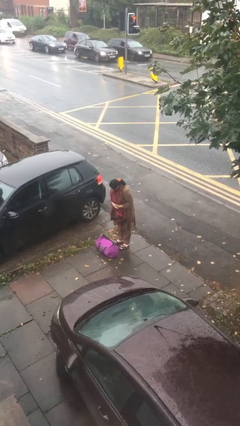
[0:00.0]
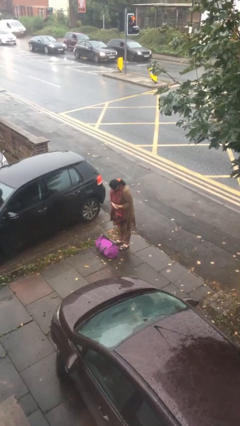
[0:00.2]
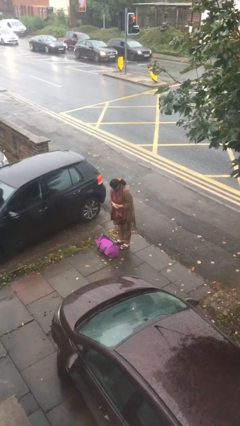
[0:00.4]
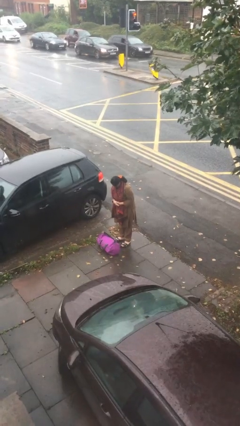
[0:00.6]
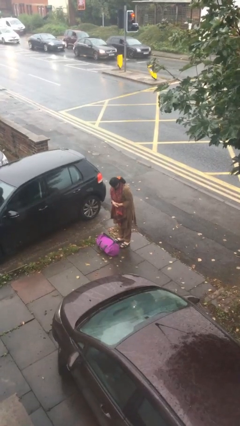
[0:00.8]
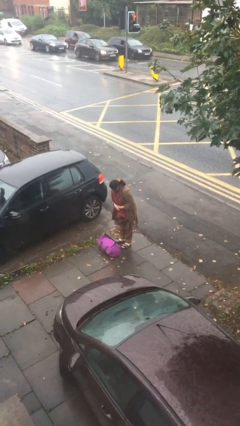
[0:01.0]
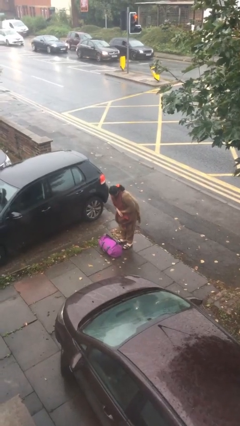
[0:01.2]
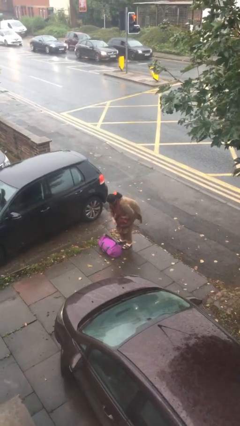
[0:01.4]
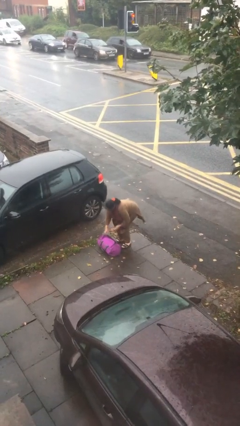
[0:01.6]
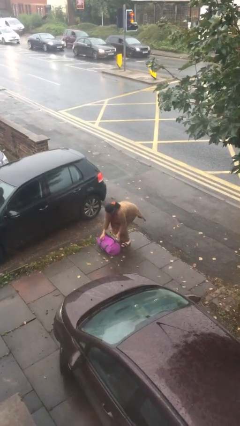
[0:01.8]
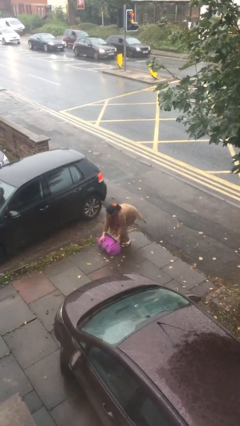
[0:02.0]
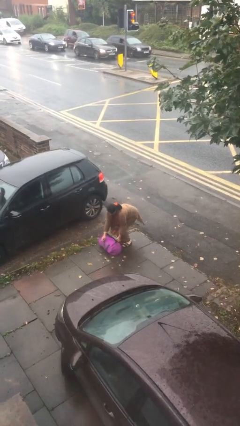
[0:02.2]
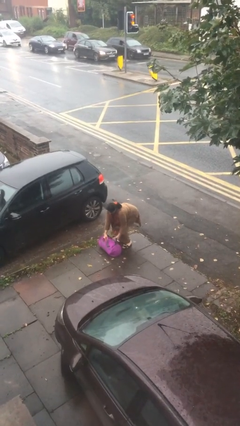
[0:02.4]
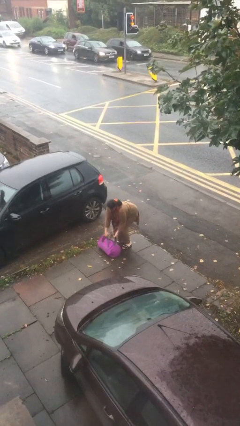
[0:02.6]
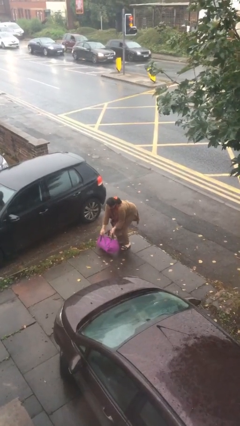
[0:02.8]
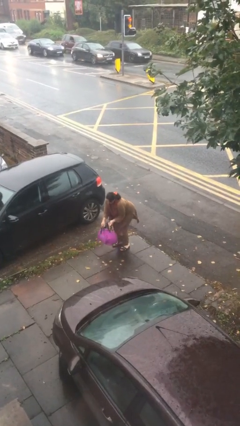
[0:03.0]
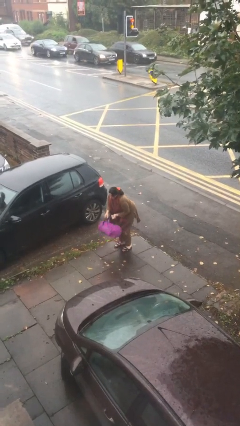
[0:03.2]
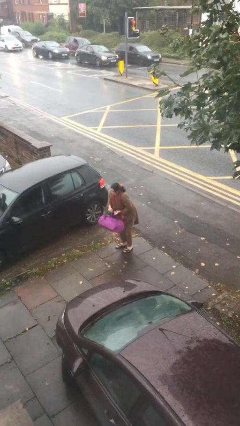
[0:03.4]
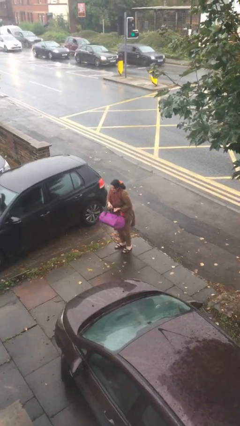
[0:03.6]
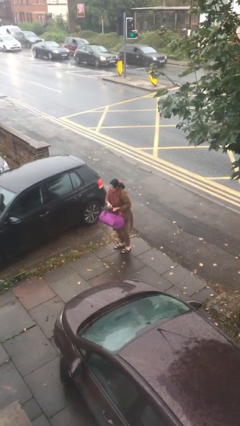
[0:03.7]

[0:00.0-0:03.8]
person picks up object from floor

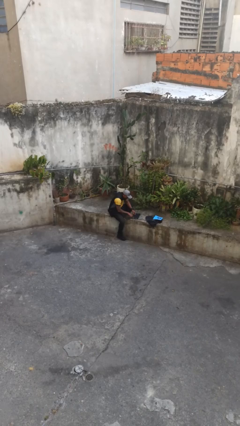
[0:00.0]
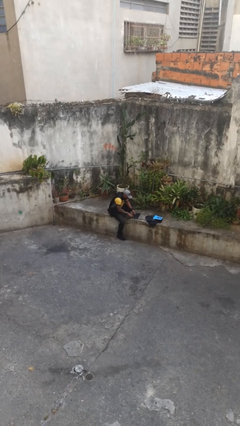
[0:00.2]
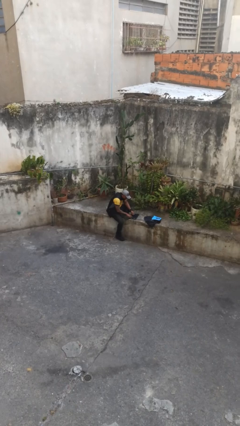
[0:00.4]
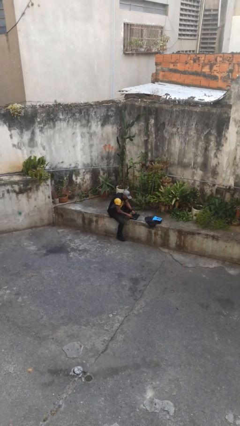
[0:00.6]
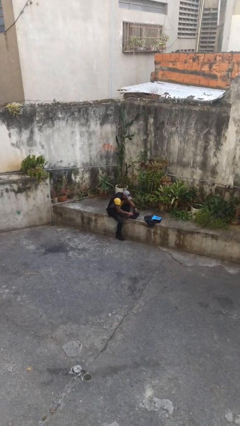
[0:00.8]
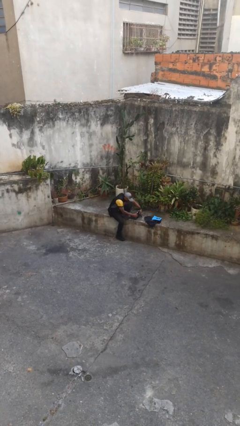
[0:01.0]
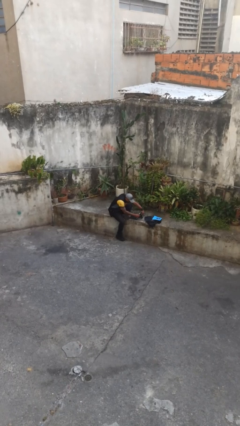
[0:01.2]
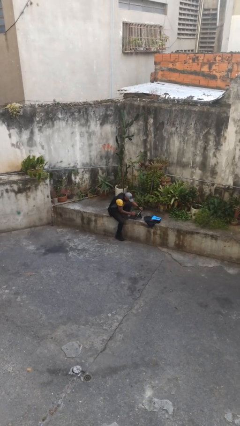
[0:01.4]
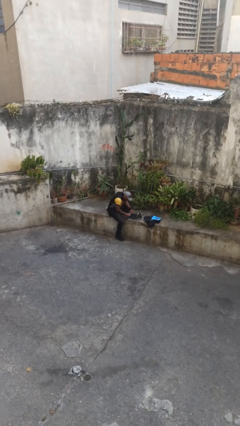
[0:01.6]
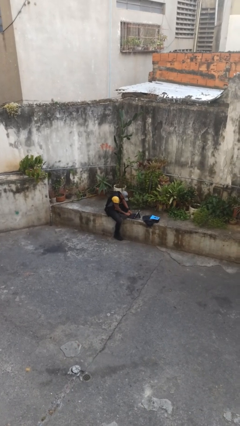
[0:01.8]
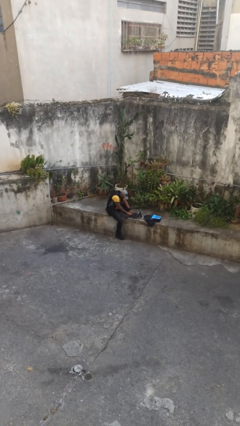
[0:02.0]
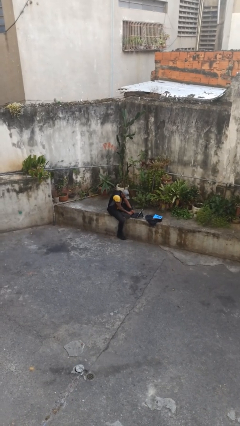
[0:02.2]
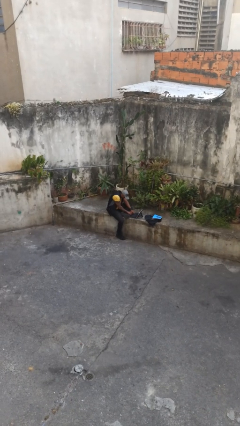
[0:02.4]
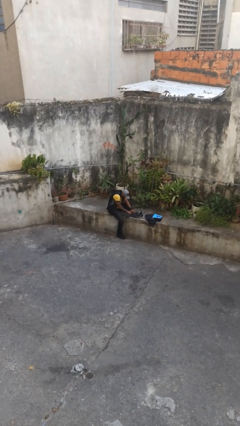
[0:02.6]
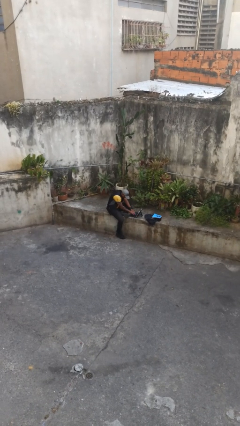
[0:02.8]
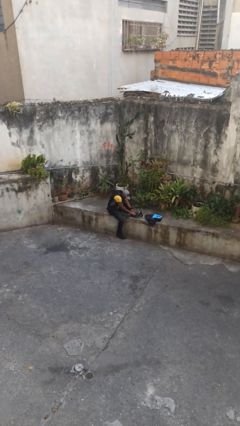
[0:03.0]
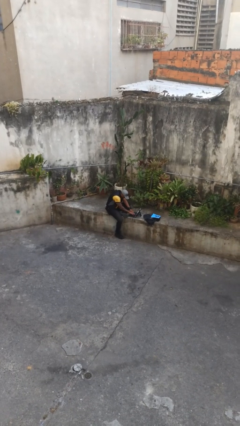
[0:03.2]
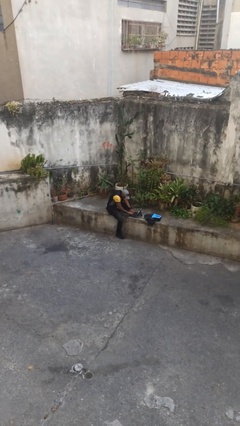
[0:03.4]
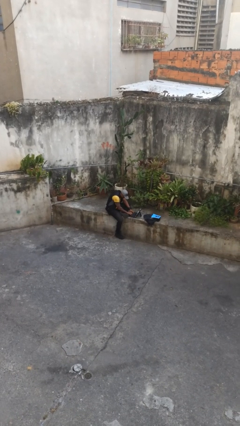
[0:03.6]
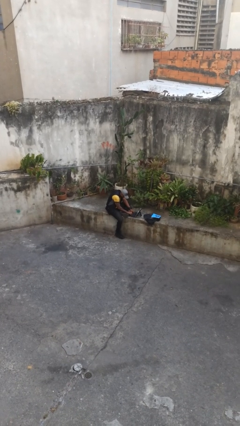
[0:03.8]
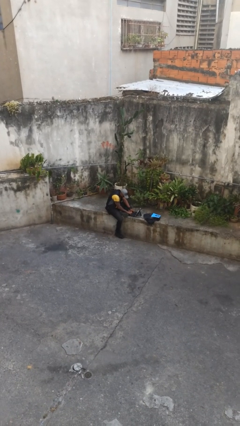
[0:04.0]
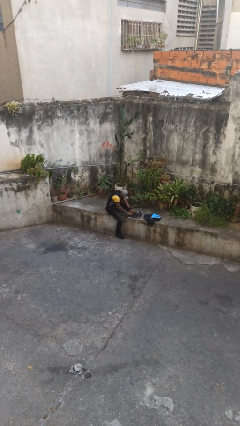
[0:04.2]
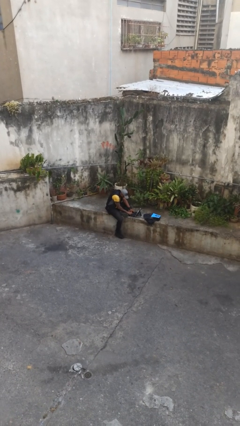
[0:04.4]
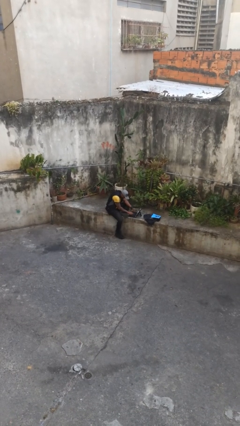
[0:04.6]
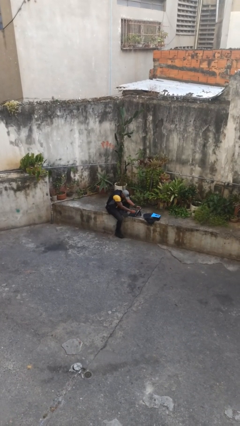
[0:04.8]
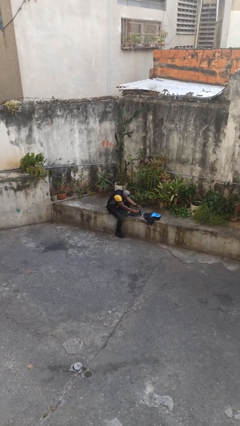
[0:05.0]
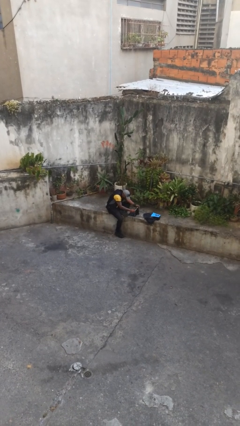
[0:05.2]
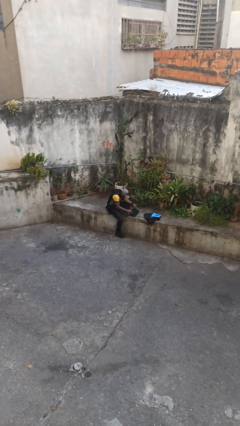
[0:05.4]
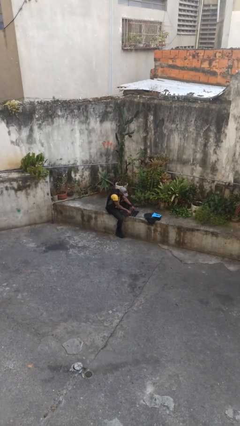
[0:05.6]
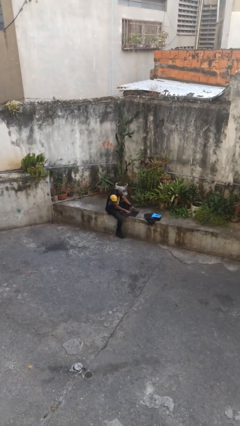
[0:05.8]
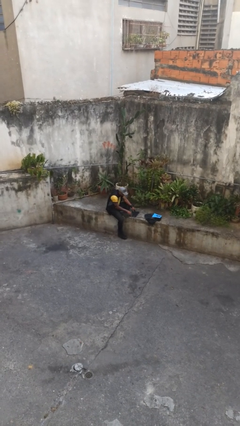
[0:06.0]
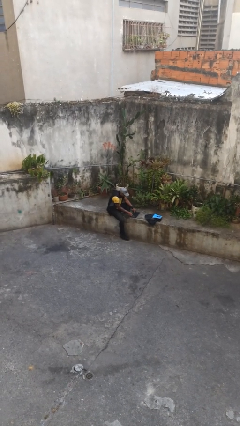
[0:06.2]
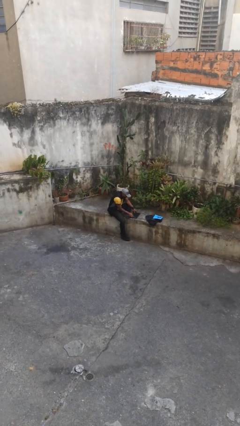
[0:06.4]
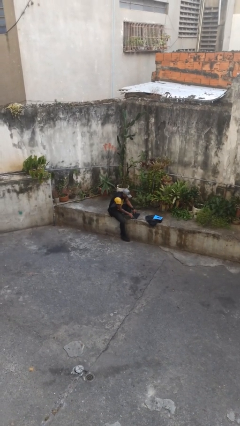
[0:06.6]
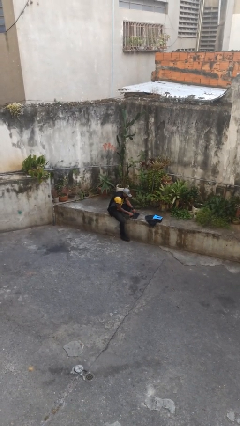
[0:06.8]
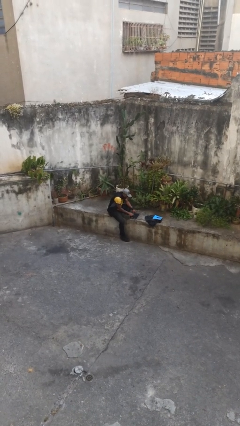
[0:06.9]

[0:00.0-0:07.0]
person interacts with laptop

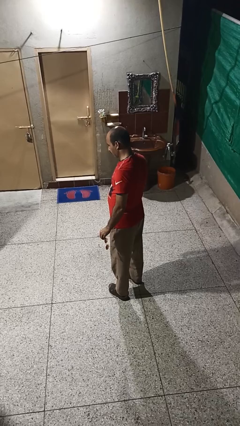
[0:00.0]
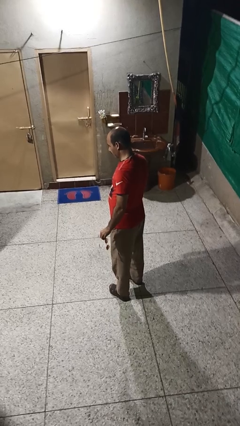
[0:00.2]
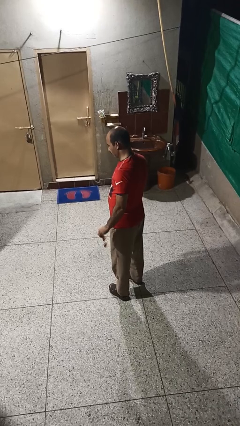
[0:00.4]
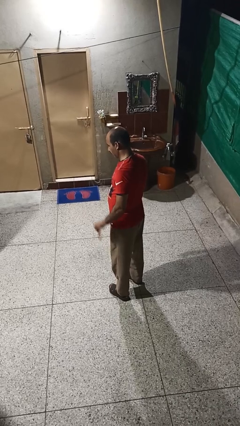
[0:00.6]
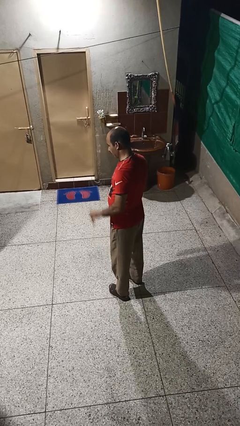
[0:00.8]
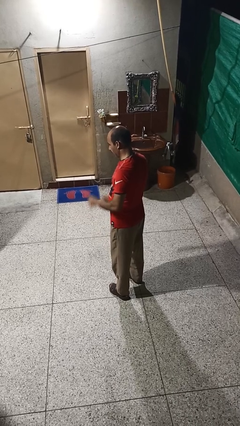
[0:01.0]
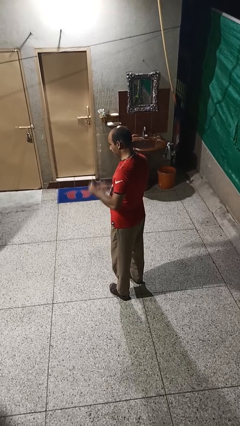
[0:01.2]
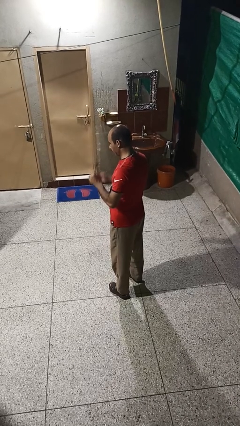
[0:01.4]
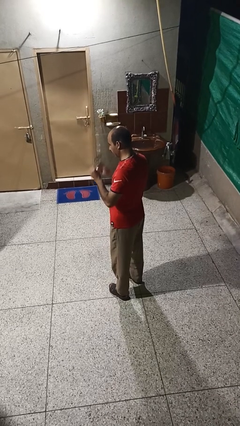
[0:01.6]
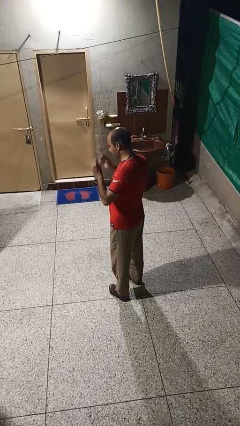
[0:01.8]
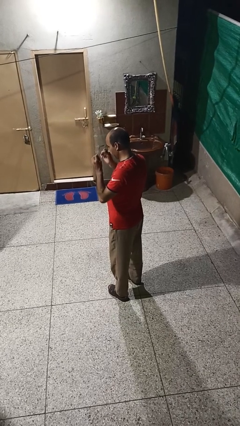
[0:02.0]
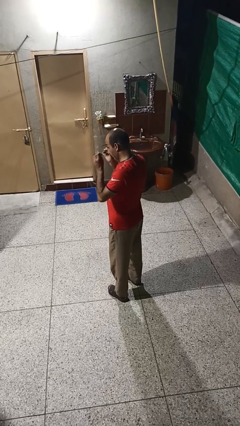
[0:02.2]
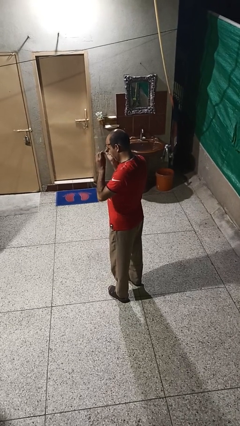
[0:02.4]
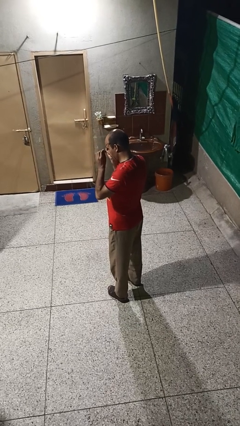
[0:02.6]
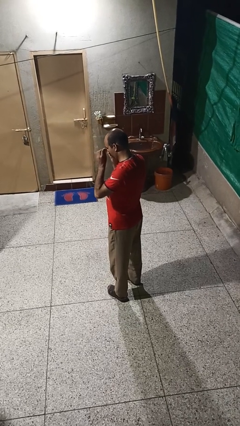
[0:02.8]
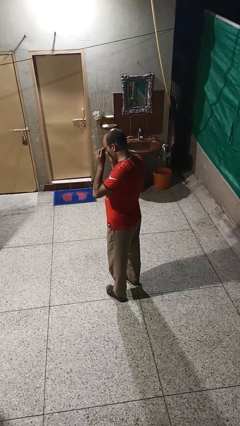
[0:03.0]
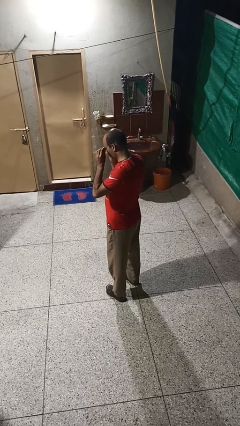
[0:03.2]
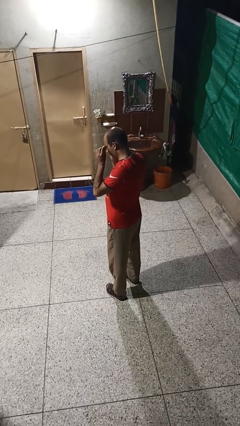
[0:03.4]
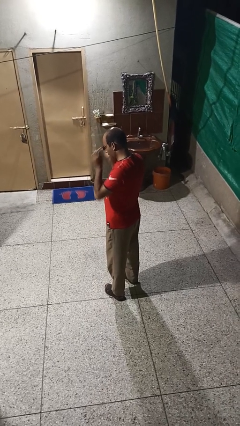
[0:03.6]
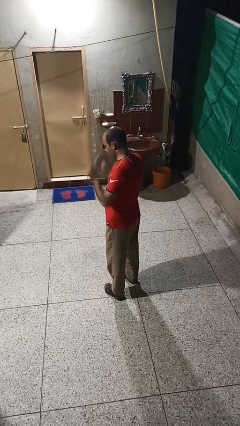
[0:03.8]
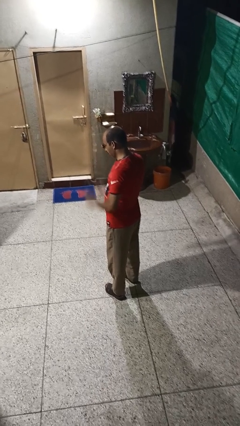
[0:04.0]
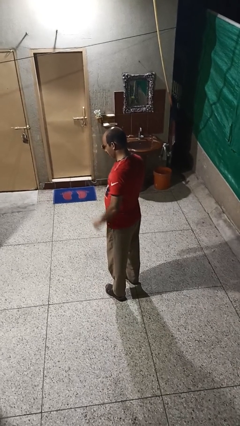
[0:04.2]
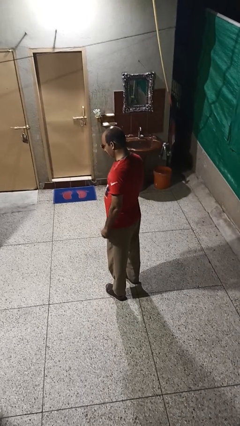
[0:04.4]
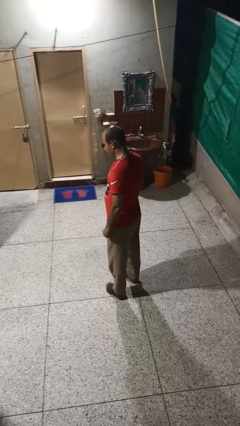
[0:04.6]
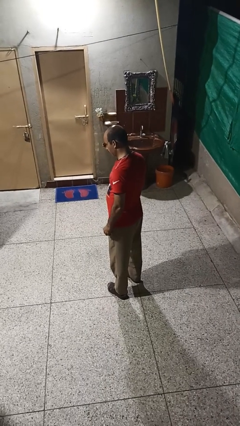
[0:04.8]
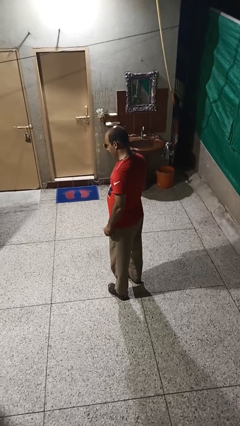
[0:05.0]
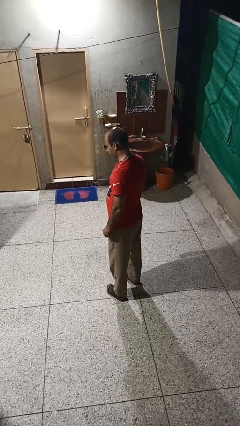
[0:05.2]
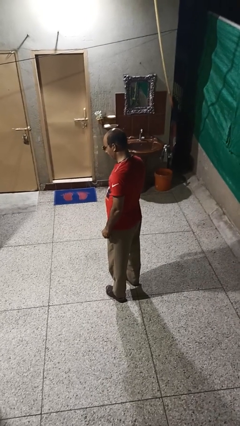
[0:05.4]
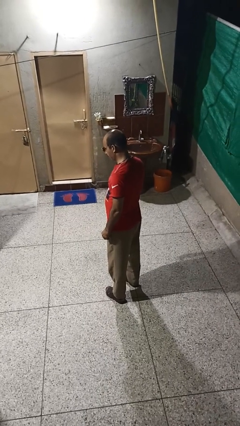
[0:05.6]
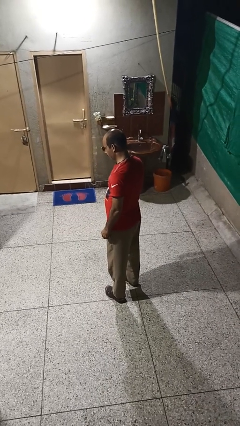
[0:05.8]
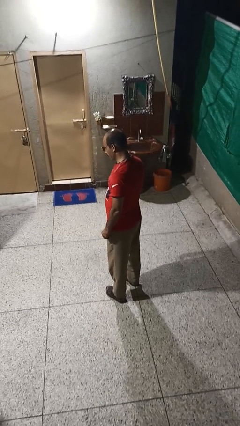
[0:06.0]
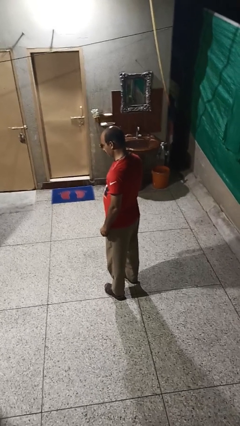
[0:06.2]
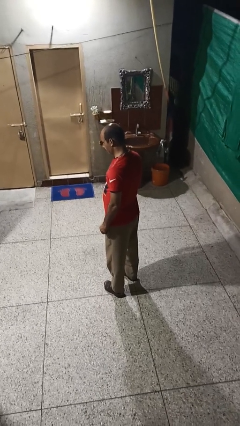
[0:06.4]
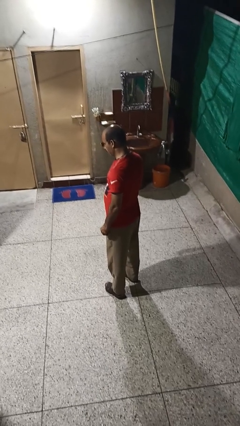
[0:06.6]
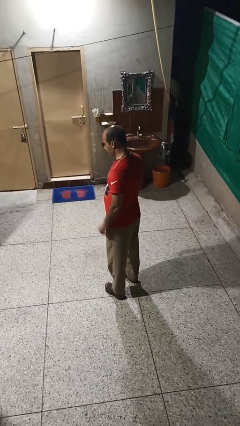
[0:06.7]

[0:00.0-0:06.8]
person puts on sunglasses

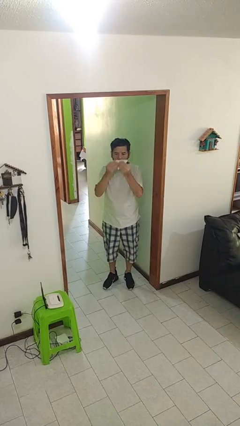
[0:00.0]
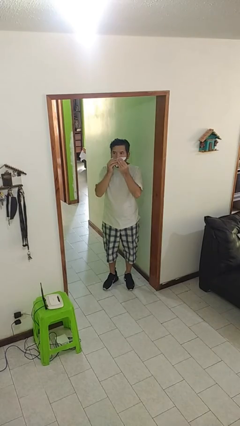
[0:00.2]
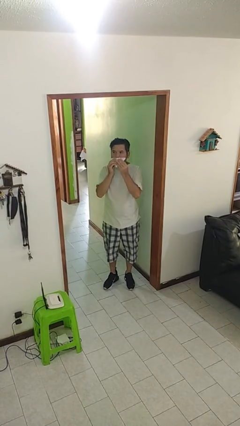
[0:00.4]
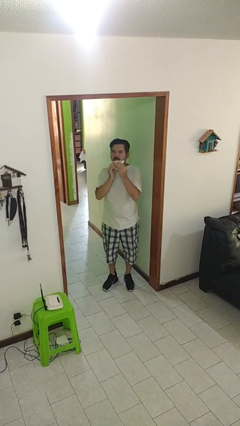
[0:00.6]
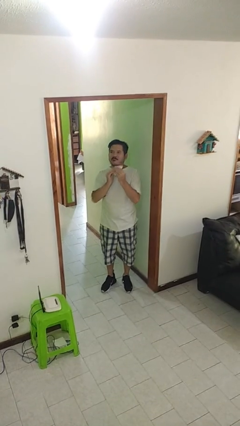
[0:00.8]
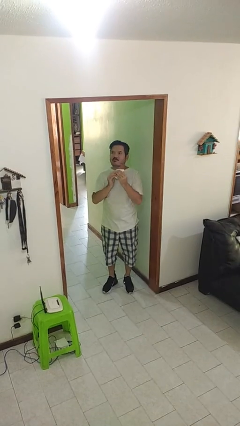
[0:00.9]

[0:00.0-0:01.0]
person wipes mouth with napkin
